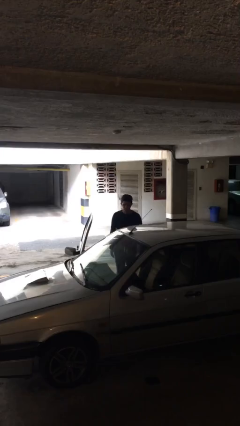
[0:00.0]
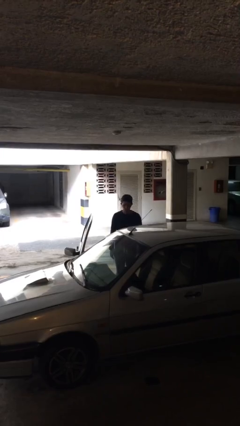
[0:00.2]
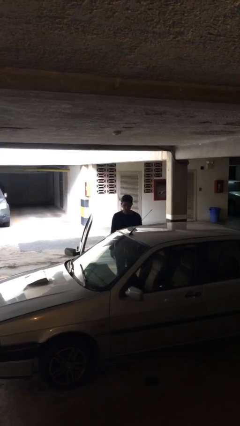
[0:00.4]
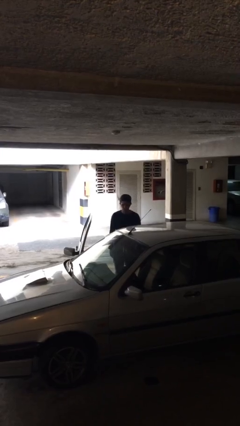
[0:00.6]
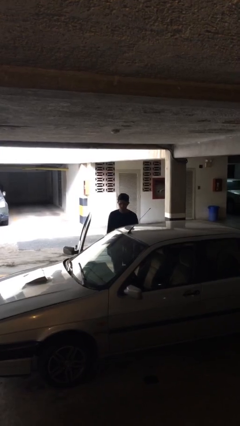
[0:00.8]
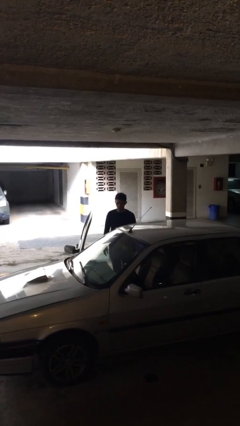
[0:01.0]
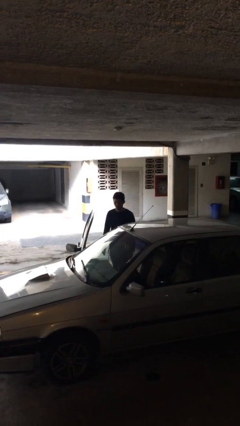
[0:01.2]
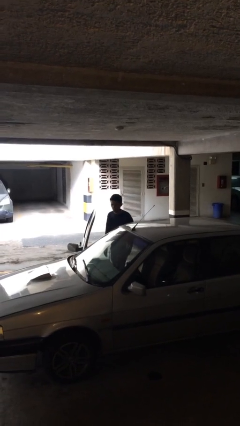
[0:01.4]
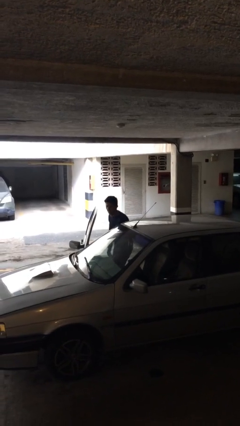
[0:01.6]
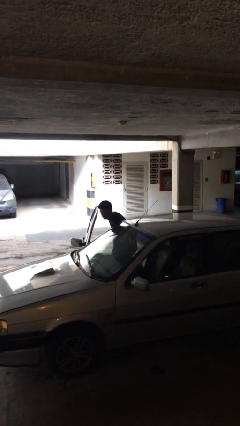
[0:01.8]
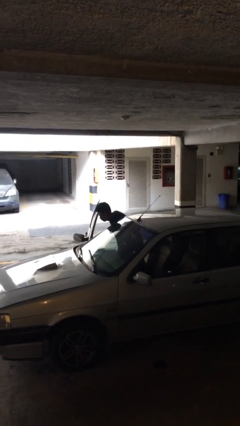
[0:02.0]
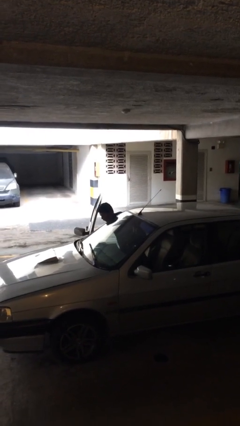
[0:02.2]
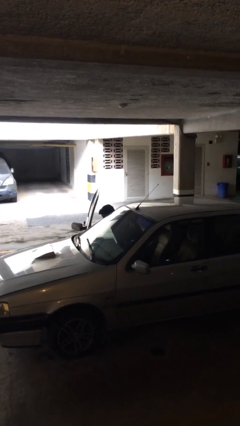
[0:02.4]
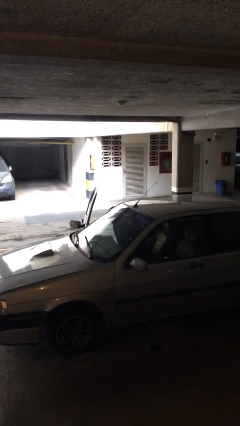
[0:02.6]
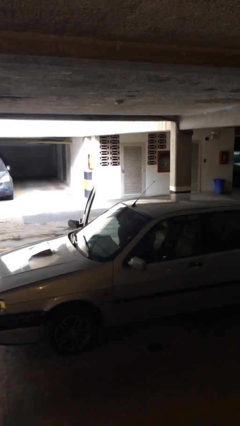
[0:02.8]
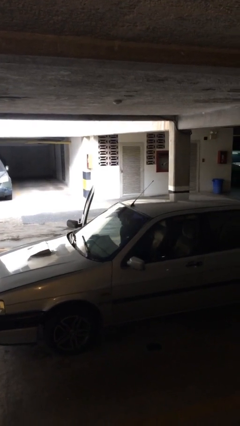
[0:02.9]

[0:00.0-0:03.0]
person enters car

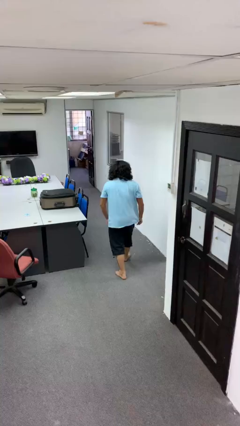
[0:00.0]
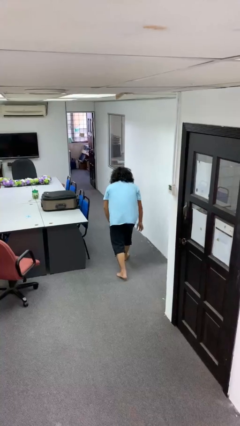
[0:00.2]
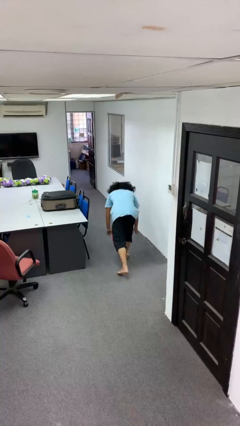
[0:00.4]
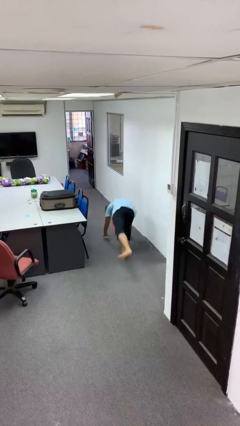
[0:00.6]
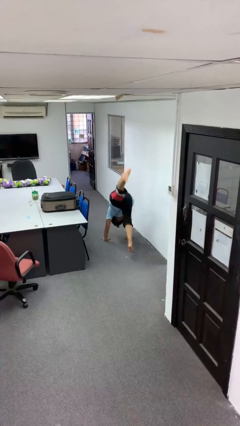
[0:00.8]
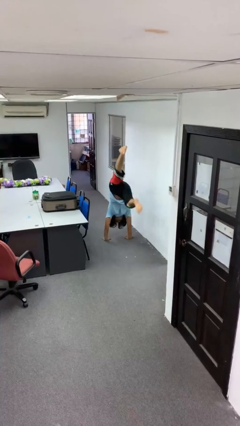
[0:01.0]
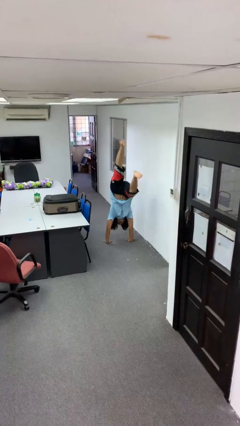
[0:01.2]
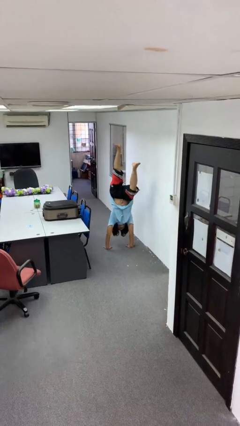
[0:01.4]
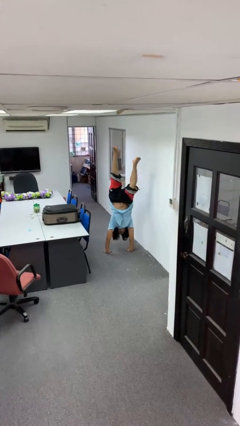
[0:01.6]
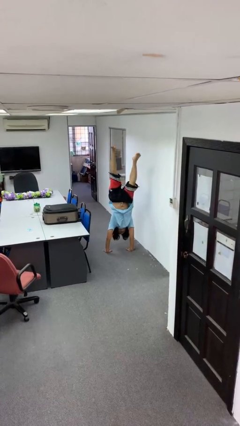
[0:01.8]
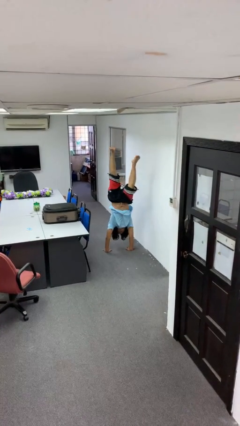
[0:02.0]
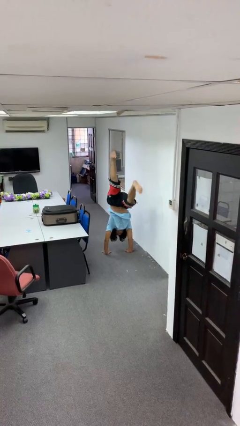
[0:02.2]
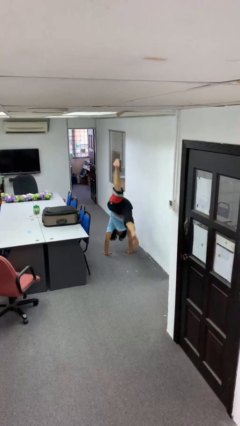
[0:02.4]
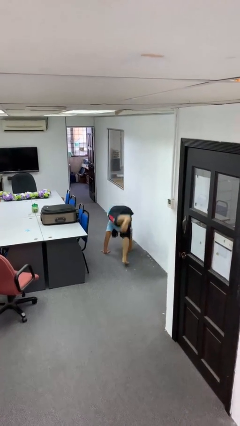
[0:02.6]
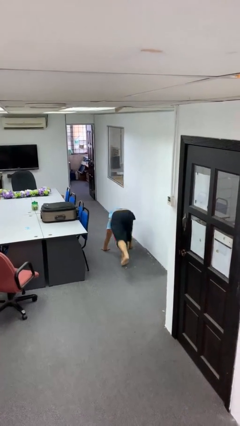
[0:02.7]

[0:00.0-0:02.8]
person handstand

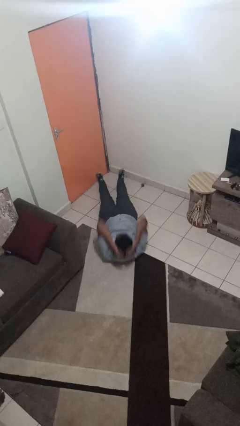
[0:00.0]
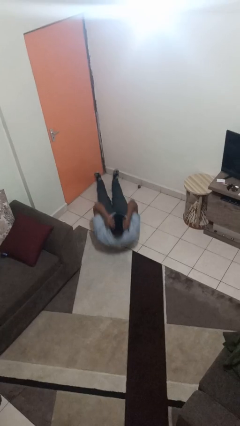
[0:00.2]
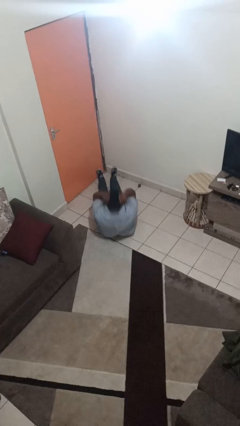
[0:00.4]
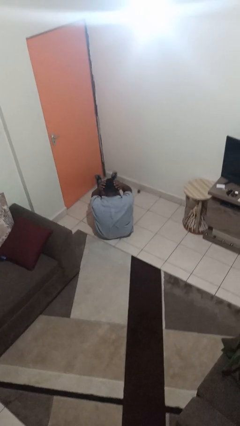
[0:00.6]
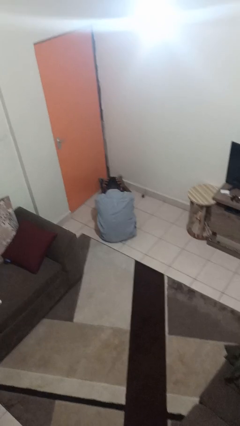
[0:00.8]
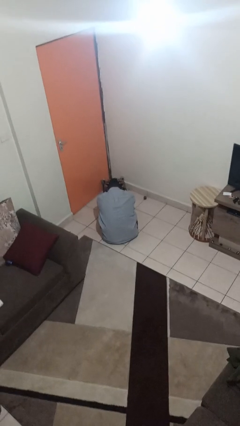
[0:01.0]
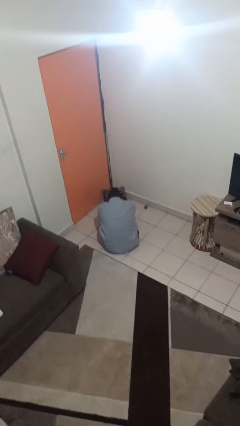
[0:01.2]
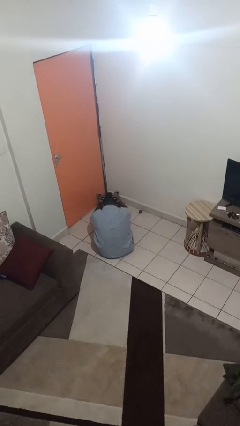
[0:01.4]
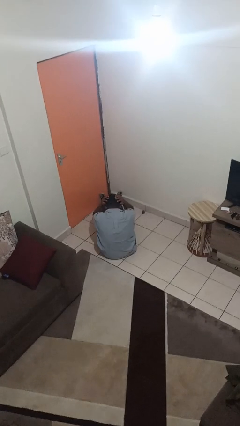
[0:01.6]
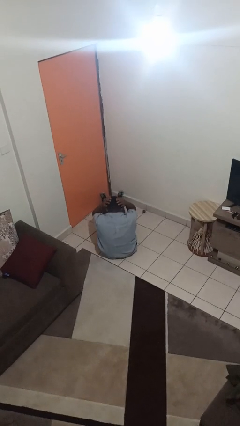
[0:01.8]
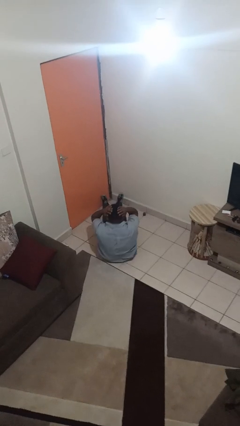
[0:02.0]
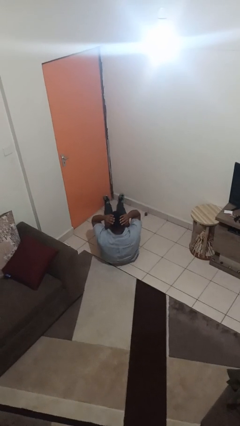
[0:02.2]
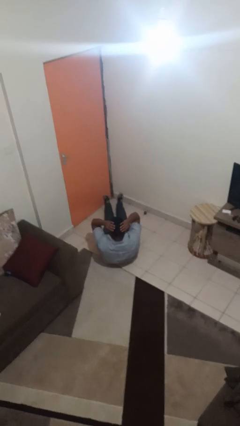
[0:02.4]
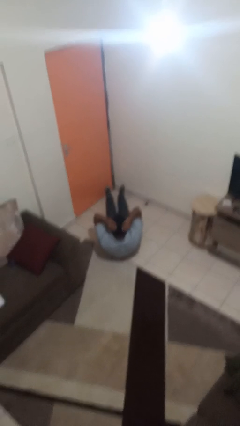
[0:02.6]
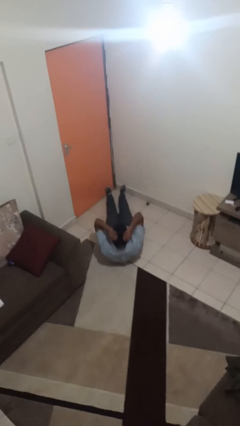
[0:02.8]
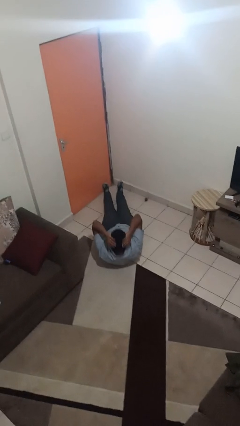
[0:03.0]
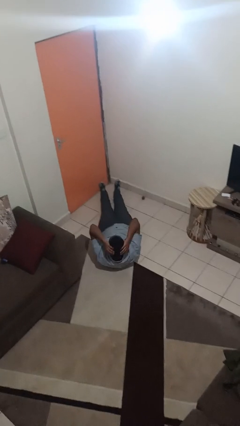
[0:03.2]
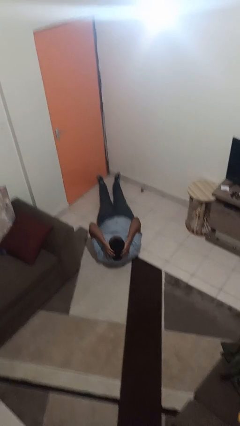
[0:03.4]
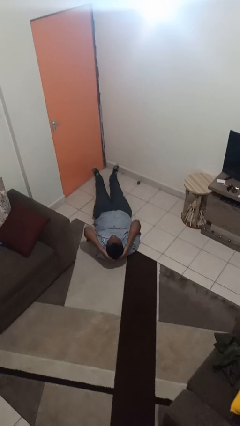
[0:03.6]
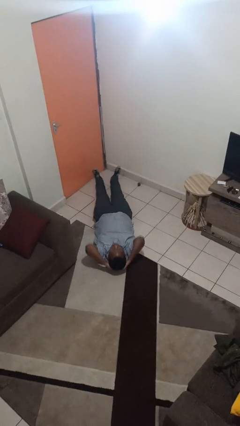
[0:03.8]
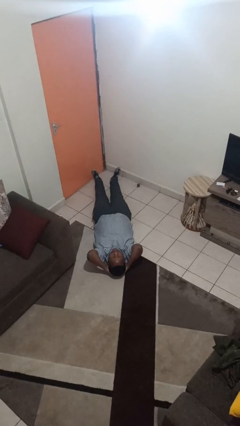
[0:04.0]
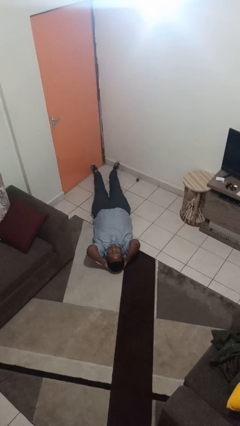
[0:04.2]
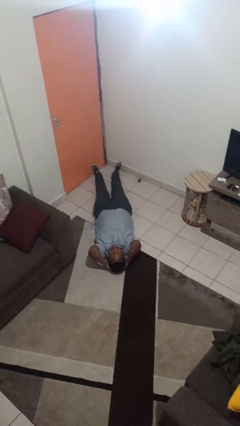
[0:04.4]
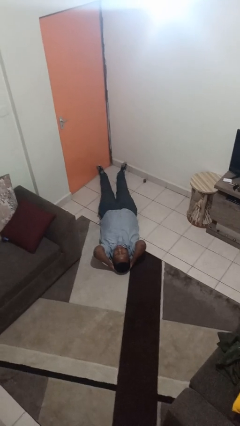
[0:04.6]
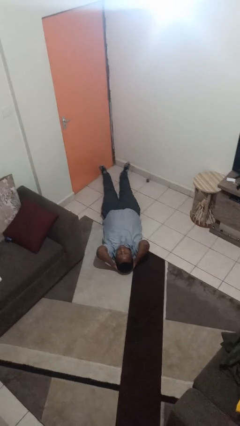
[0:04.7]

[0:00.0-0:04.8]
person exercises with pushup

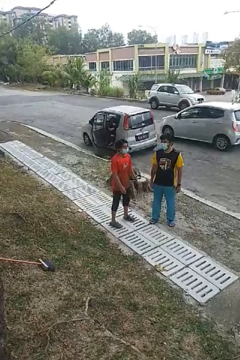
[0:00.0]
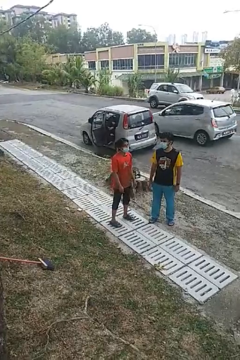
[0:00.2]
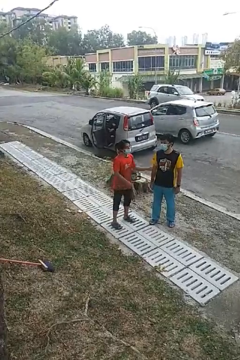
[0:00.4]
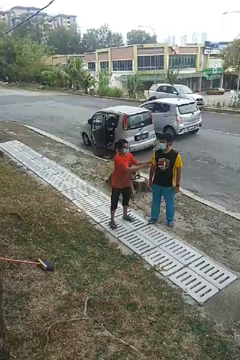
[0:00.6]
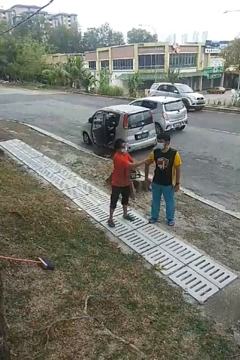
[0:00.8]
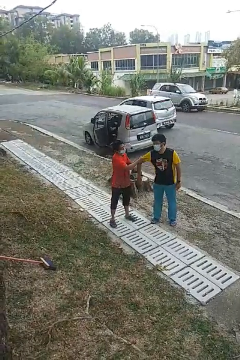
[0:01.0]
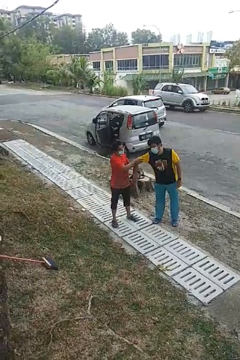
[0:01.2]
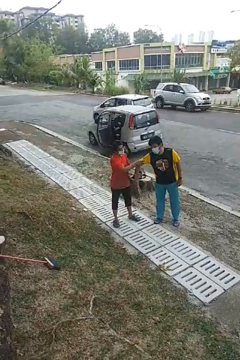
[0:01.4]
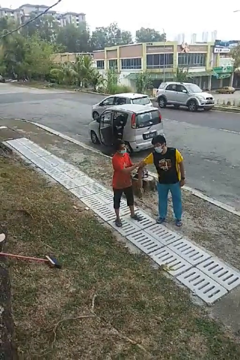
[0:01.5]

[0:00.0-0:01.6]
person grabs person by bicep

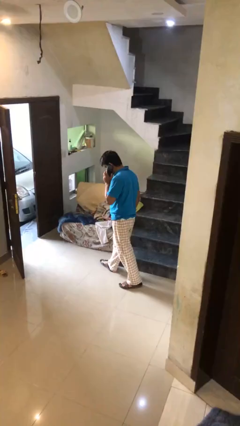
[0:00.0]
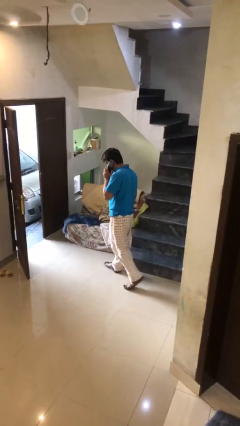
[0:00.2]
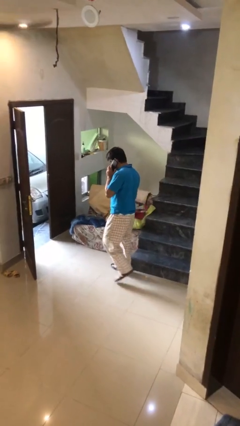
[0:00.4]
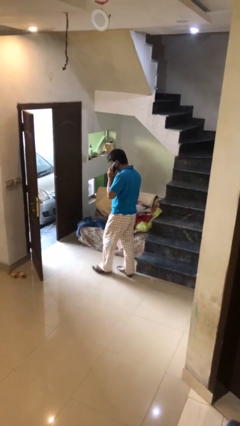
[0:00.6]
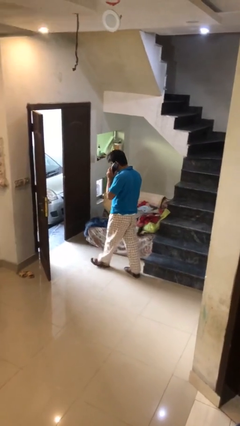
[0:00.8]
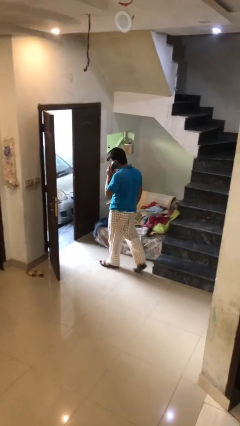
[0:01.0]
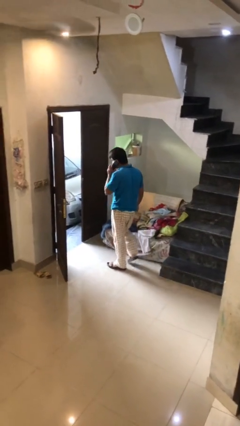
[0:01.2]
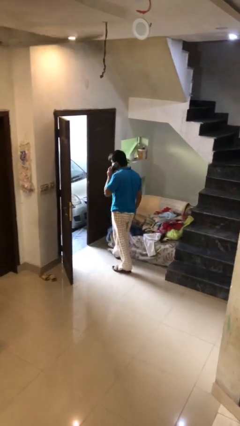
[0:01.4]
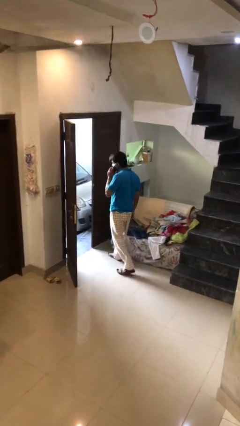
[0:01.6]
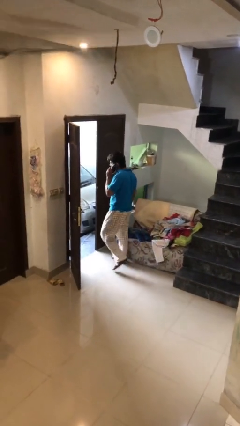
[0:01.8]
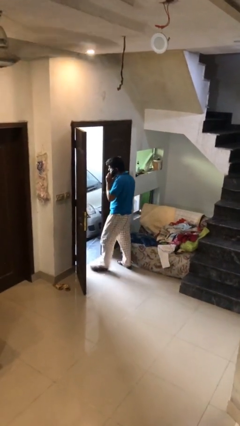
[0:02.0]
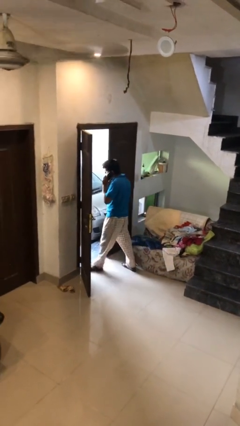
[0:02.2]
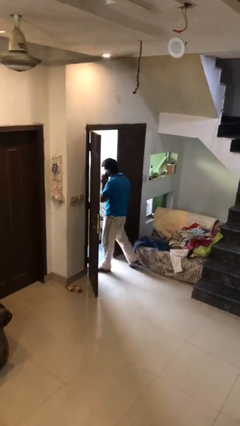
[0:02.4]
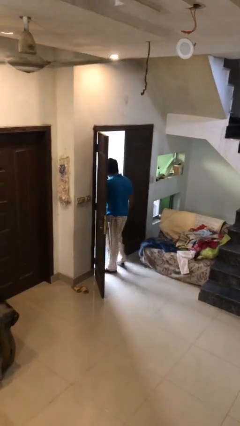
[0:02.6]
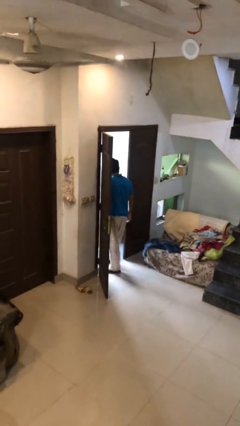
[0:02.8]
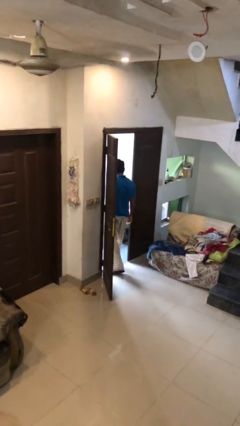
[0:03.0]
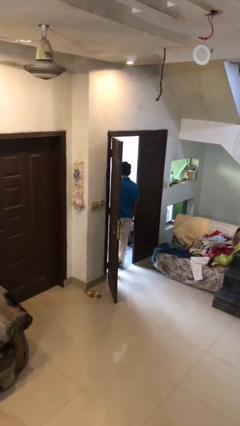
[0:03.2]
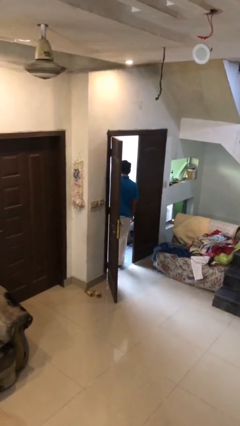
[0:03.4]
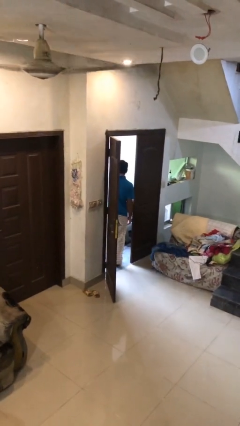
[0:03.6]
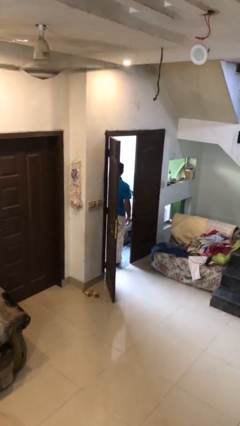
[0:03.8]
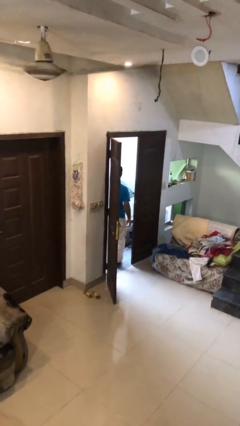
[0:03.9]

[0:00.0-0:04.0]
person exits scene through structure

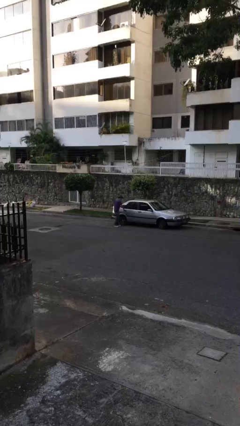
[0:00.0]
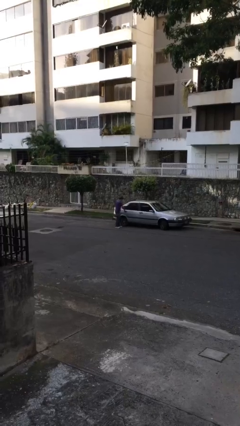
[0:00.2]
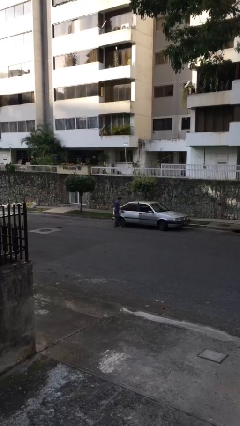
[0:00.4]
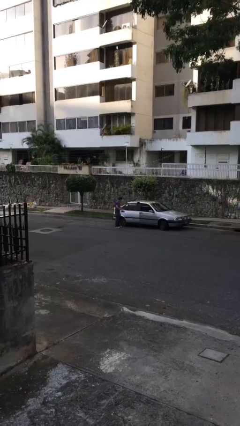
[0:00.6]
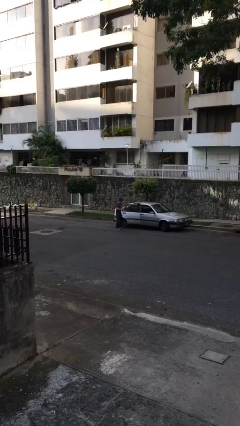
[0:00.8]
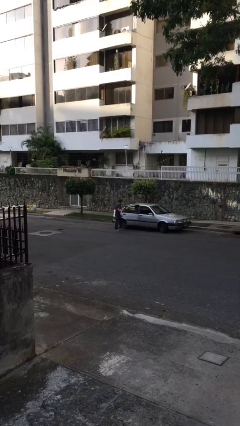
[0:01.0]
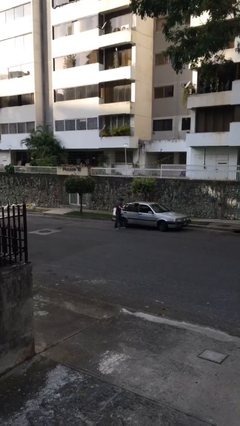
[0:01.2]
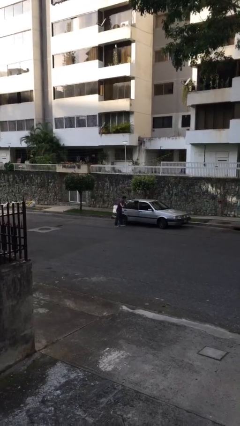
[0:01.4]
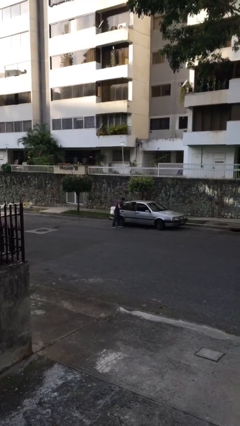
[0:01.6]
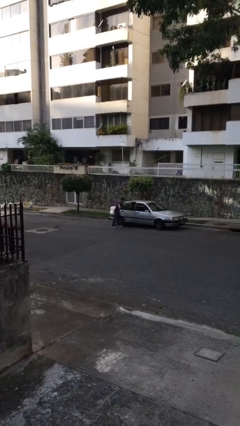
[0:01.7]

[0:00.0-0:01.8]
person opens car door
